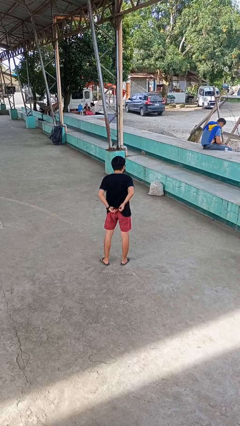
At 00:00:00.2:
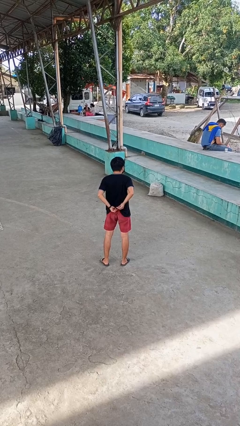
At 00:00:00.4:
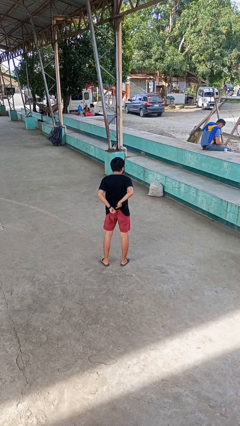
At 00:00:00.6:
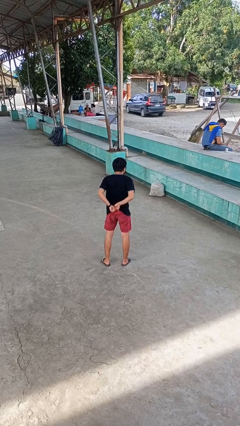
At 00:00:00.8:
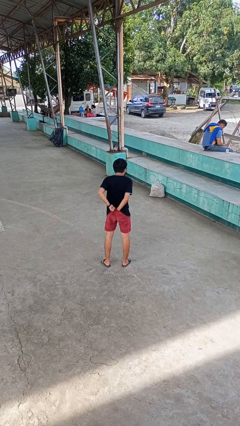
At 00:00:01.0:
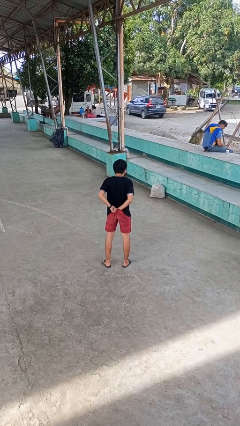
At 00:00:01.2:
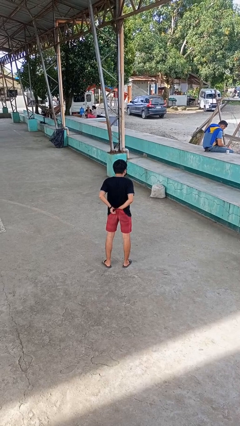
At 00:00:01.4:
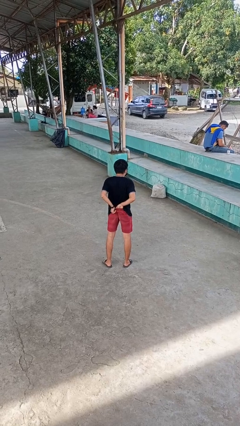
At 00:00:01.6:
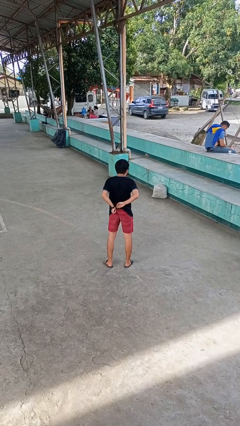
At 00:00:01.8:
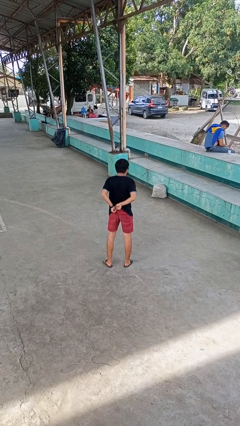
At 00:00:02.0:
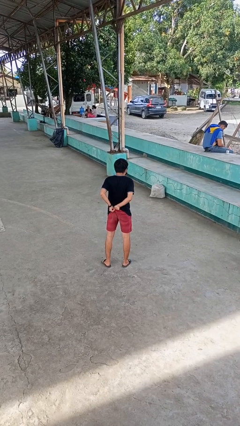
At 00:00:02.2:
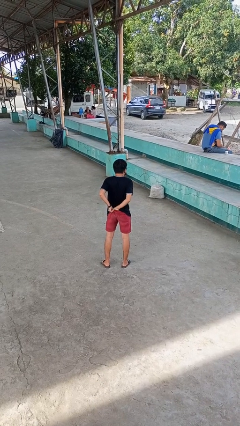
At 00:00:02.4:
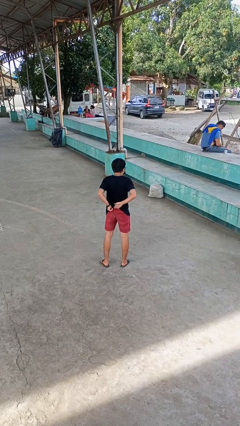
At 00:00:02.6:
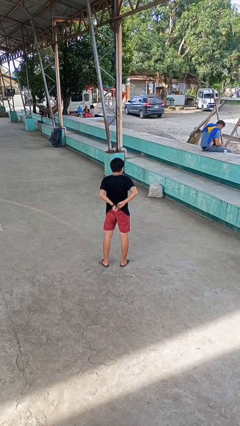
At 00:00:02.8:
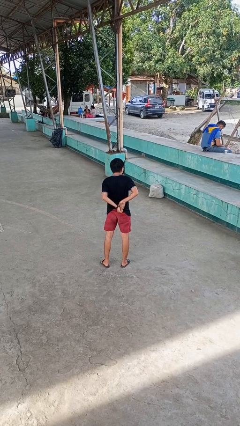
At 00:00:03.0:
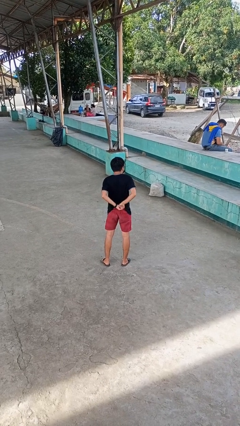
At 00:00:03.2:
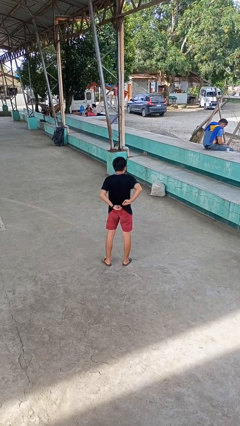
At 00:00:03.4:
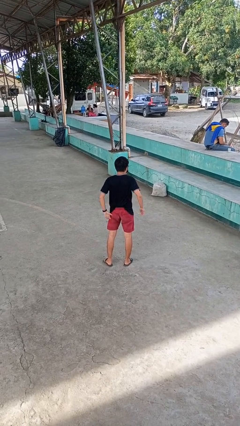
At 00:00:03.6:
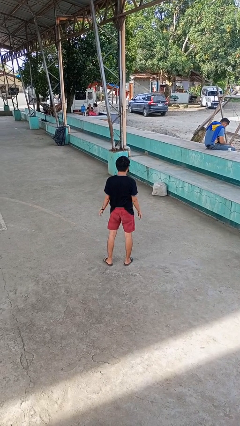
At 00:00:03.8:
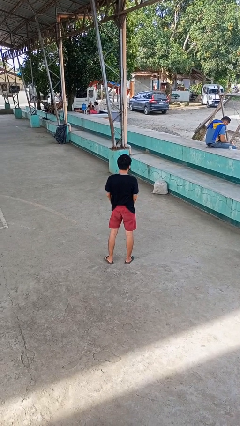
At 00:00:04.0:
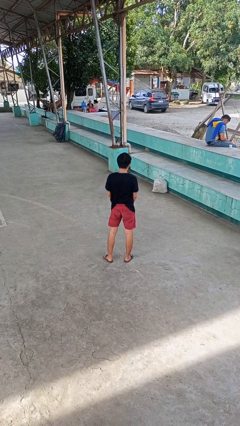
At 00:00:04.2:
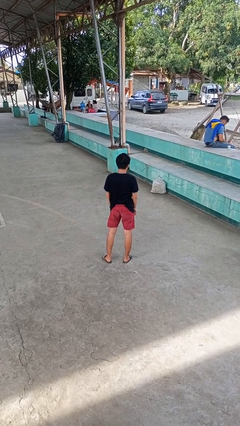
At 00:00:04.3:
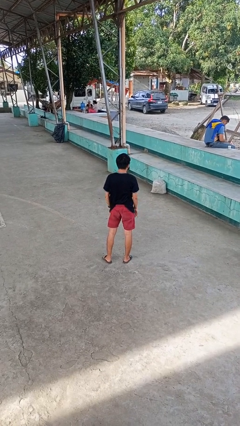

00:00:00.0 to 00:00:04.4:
person tucks in shirt

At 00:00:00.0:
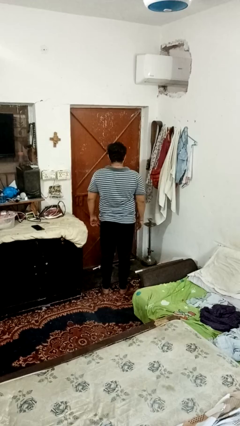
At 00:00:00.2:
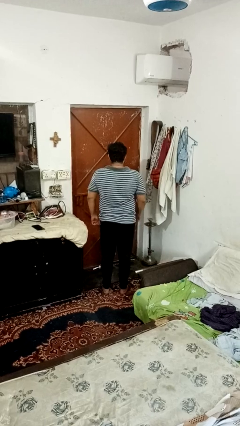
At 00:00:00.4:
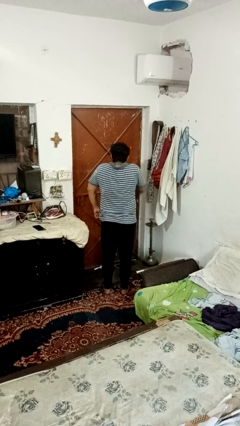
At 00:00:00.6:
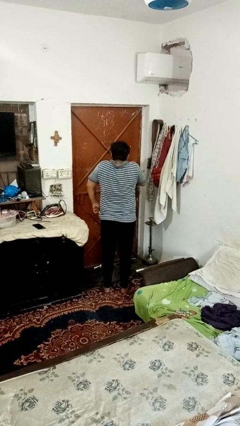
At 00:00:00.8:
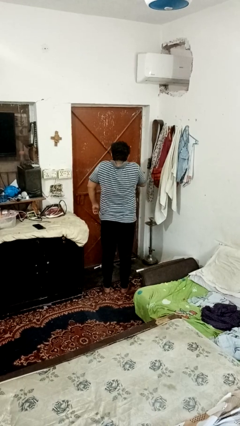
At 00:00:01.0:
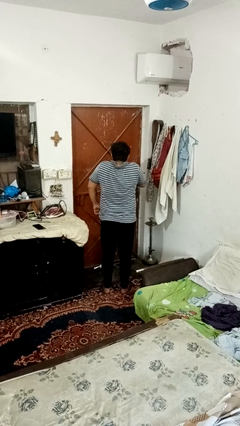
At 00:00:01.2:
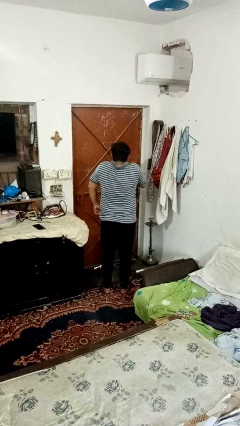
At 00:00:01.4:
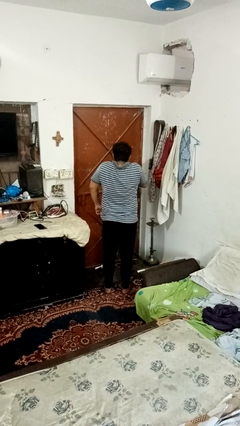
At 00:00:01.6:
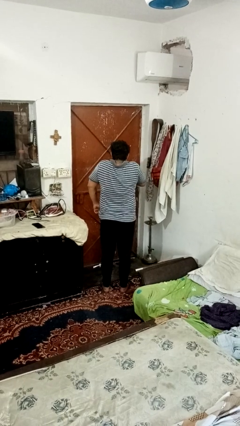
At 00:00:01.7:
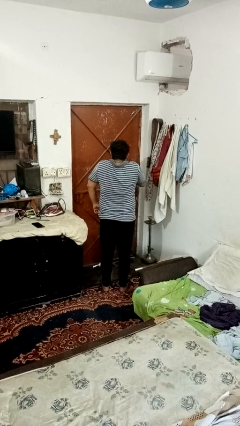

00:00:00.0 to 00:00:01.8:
person shrugs

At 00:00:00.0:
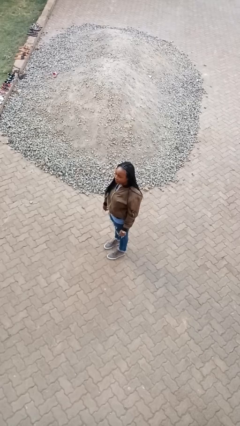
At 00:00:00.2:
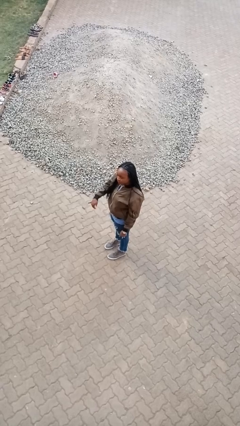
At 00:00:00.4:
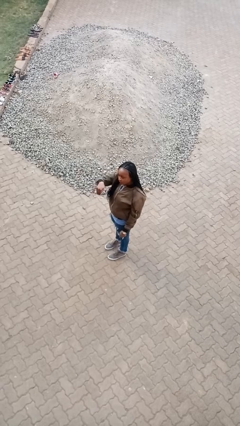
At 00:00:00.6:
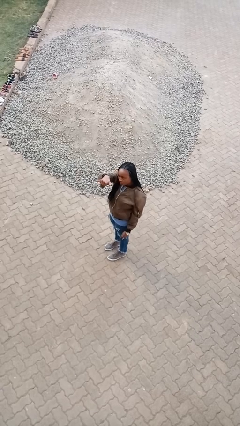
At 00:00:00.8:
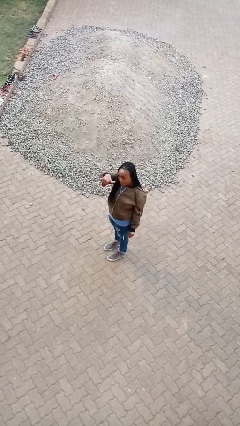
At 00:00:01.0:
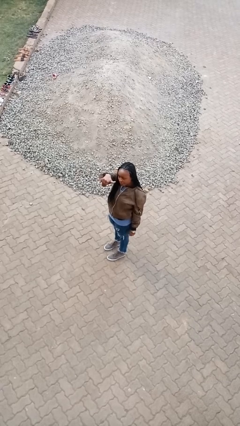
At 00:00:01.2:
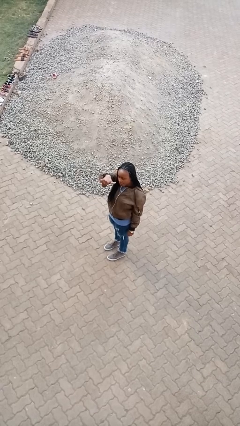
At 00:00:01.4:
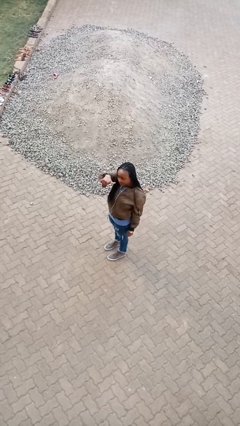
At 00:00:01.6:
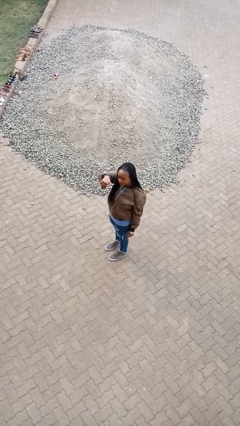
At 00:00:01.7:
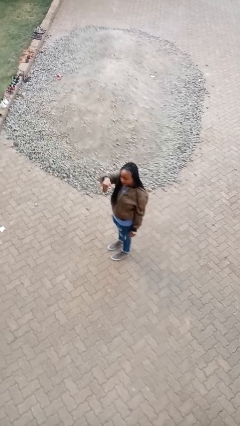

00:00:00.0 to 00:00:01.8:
person gestures hang loose

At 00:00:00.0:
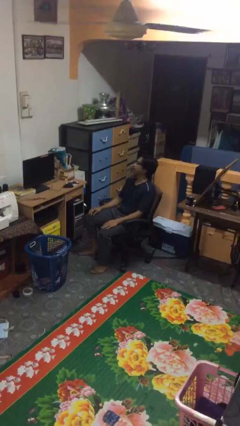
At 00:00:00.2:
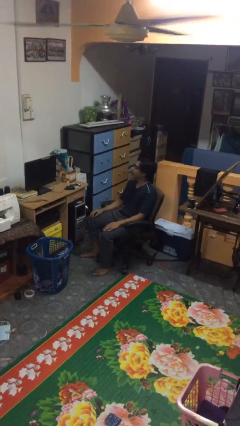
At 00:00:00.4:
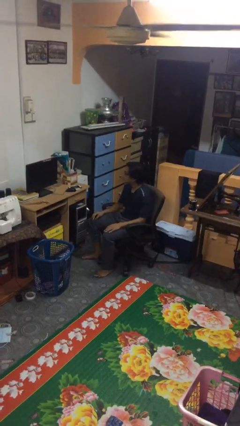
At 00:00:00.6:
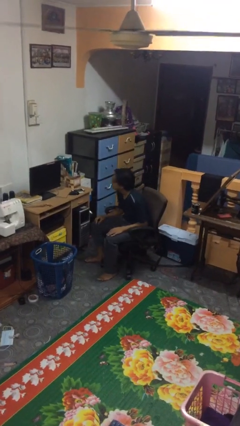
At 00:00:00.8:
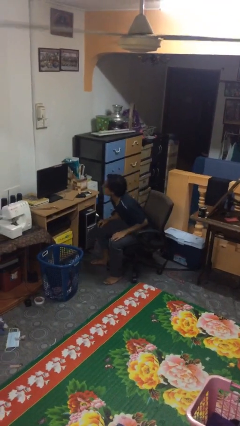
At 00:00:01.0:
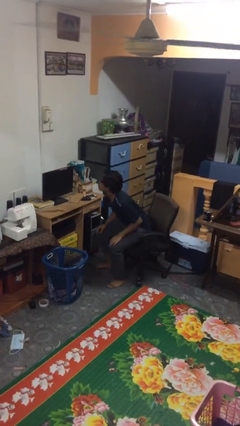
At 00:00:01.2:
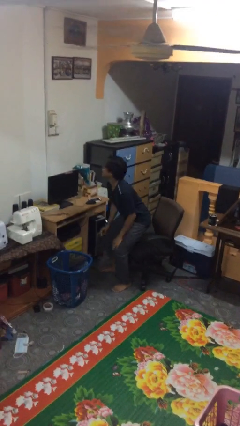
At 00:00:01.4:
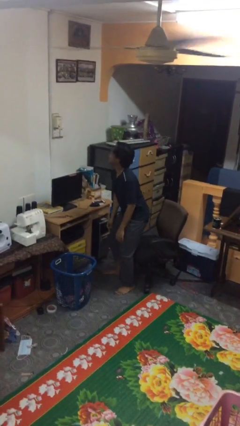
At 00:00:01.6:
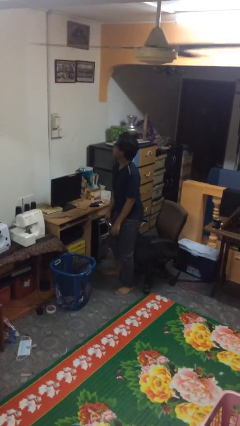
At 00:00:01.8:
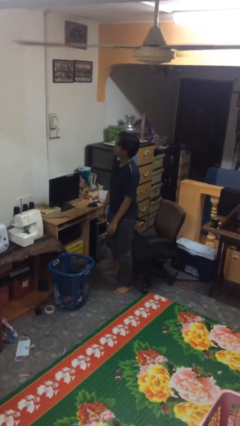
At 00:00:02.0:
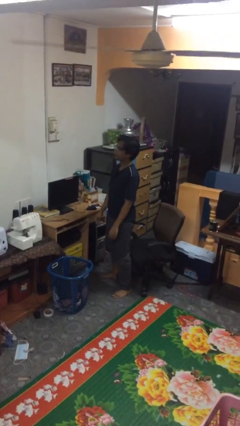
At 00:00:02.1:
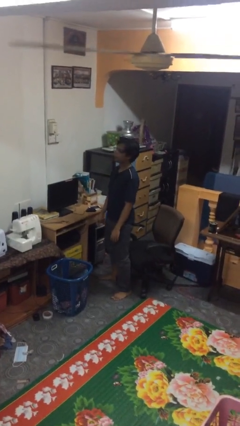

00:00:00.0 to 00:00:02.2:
person stands up

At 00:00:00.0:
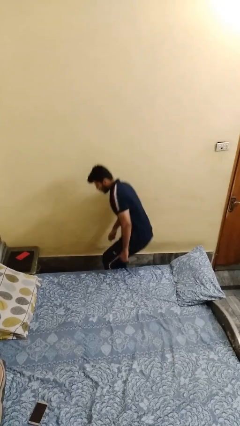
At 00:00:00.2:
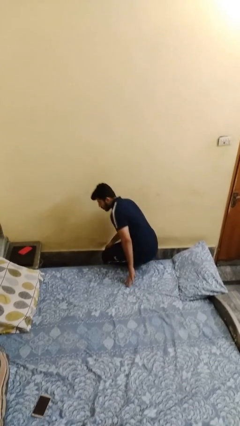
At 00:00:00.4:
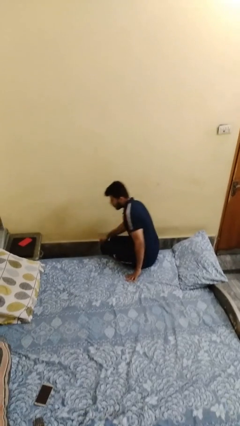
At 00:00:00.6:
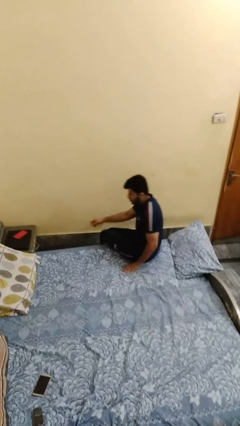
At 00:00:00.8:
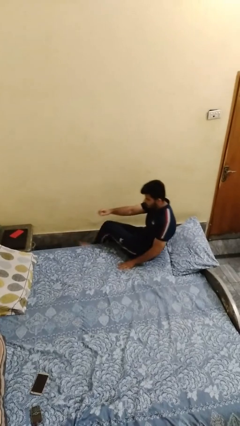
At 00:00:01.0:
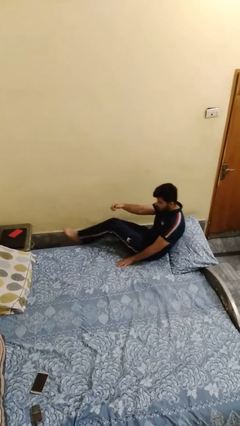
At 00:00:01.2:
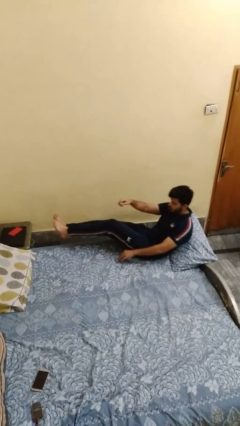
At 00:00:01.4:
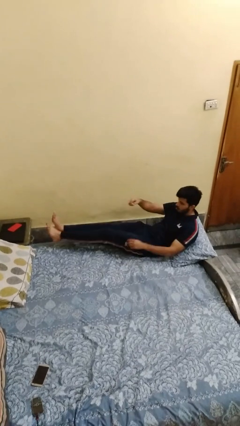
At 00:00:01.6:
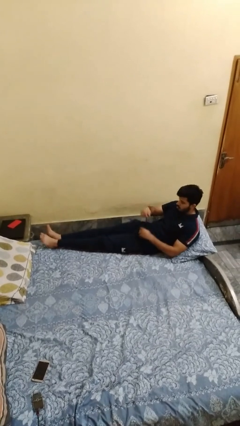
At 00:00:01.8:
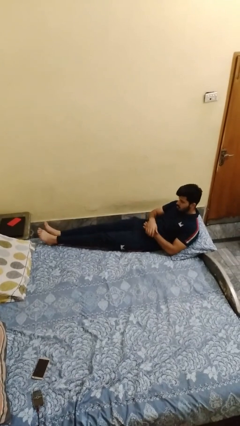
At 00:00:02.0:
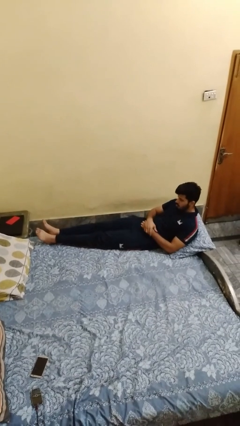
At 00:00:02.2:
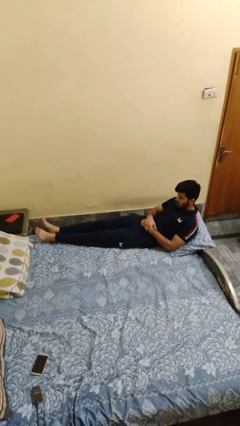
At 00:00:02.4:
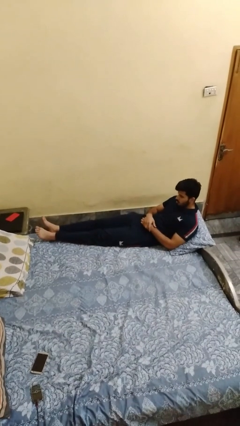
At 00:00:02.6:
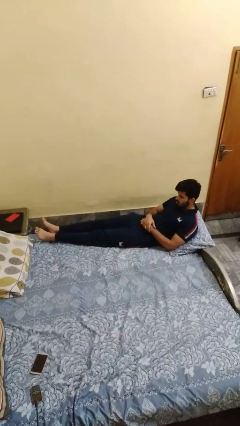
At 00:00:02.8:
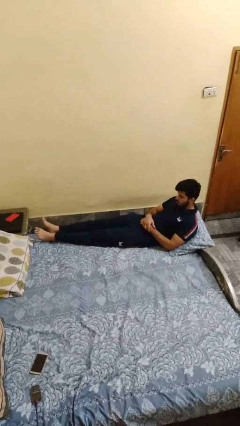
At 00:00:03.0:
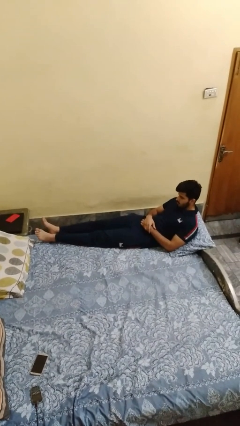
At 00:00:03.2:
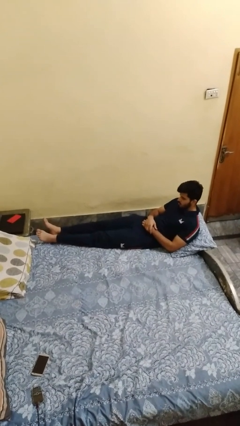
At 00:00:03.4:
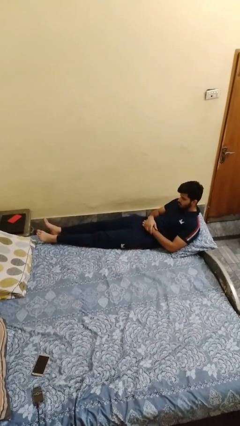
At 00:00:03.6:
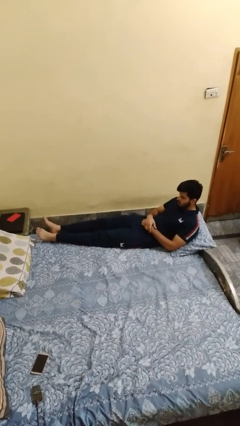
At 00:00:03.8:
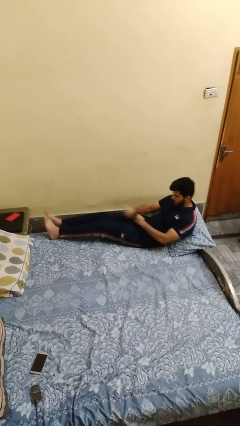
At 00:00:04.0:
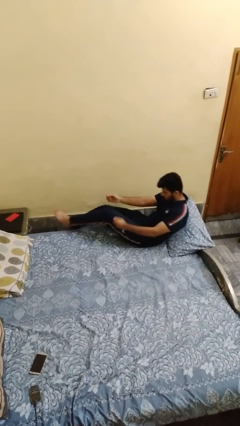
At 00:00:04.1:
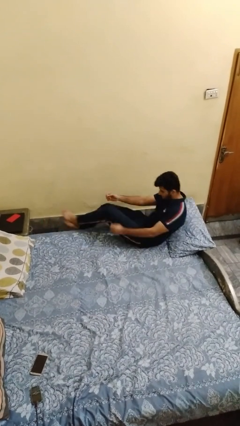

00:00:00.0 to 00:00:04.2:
person lies down on bed

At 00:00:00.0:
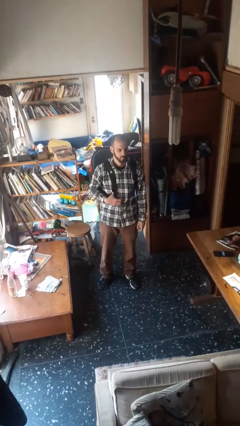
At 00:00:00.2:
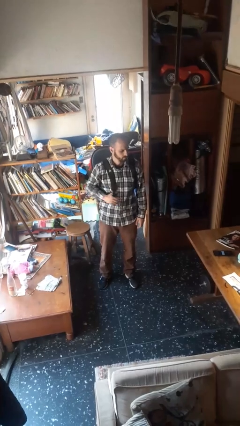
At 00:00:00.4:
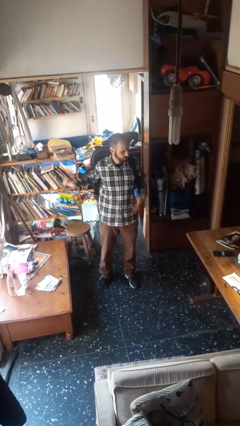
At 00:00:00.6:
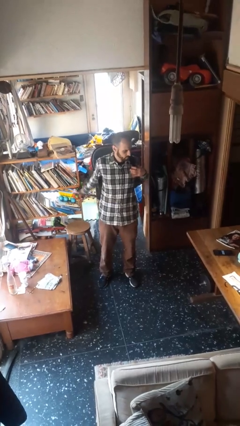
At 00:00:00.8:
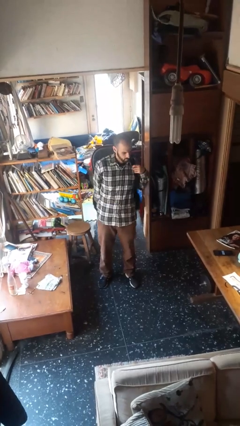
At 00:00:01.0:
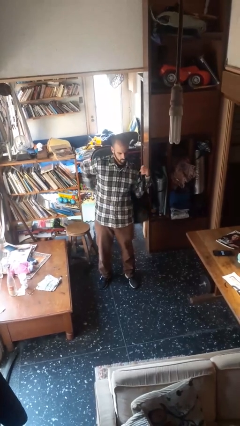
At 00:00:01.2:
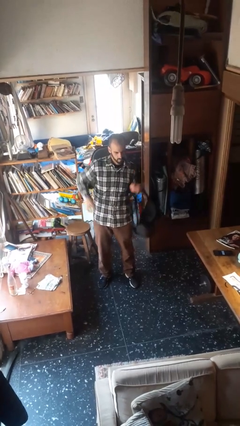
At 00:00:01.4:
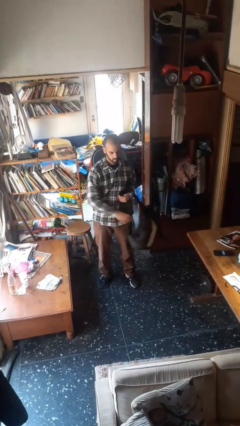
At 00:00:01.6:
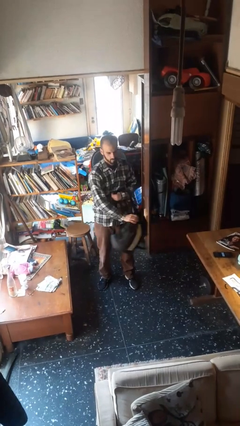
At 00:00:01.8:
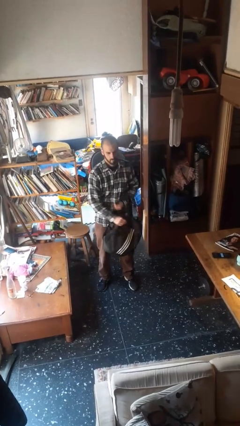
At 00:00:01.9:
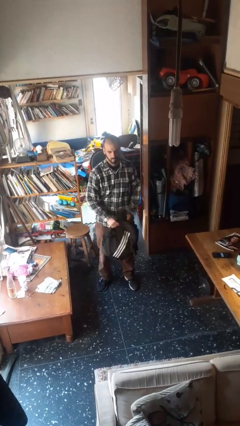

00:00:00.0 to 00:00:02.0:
person takes off backpack

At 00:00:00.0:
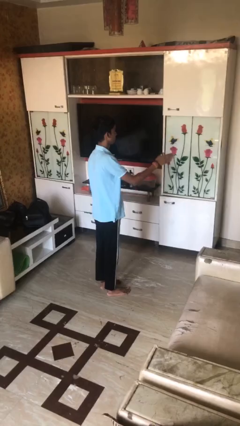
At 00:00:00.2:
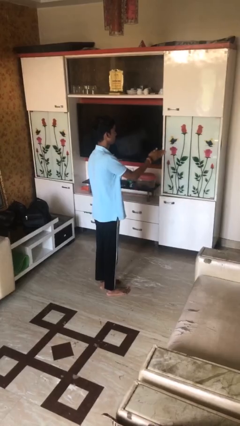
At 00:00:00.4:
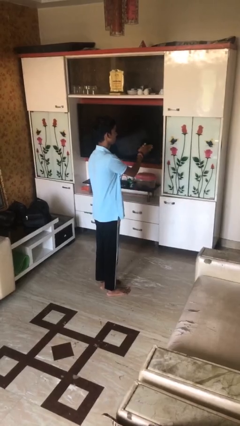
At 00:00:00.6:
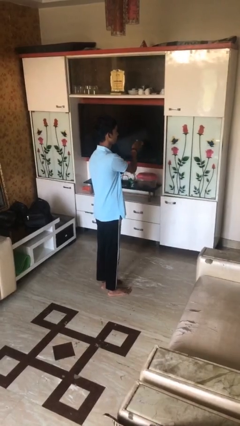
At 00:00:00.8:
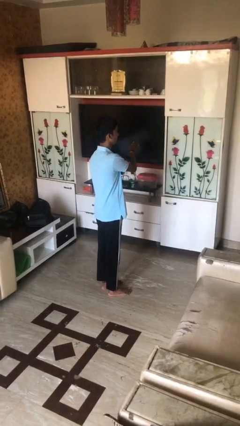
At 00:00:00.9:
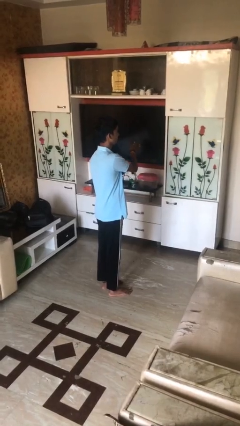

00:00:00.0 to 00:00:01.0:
person gestures swipe left
